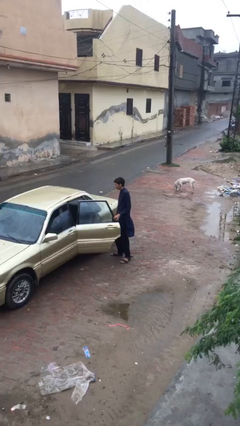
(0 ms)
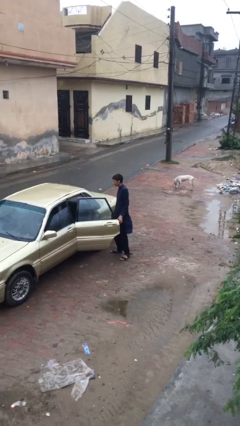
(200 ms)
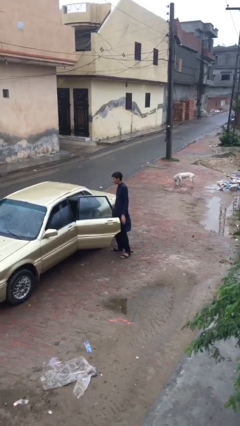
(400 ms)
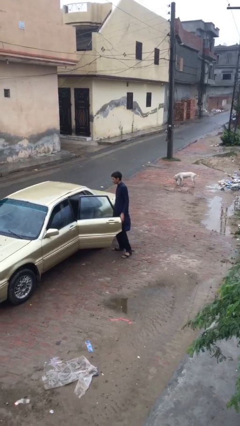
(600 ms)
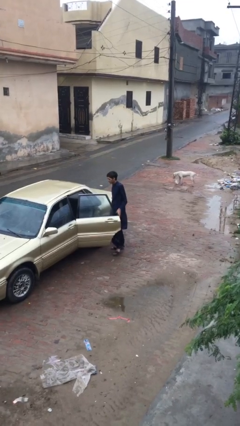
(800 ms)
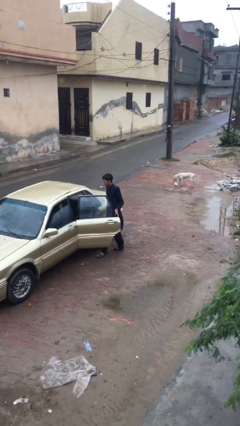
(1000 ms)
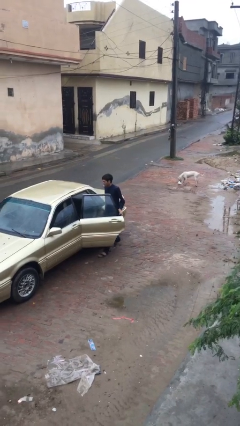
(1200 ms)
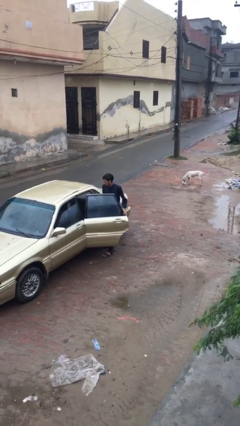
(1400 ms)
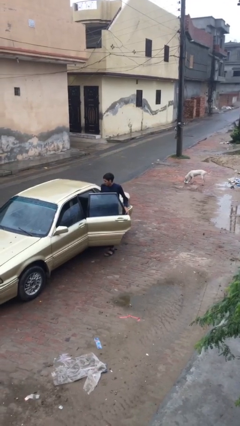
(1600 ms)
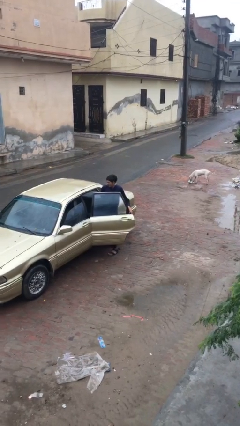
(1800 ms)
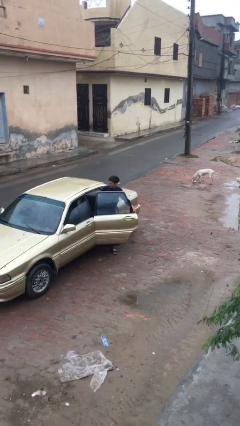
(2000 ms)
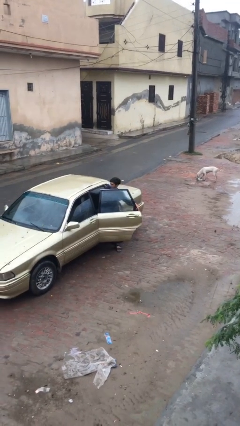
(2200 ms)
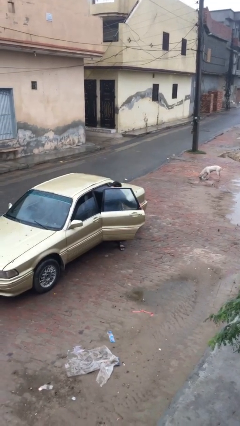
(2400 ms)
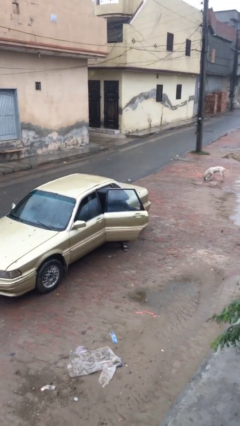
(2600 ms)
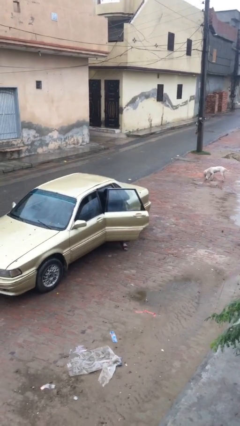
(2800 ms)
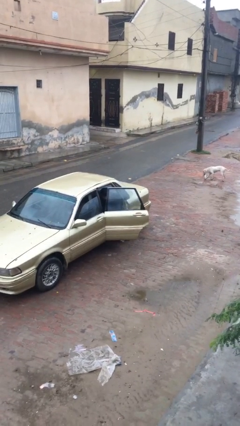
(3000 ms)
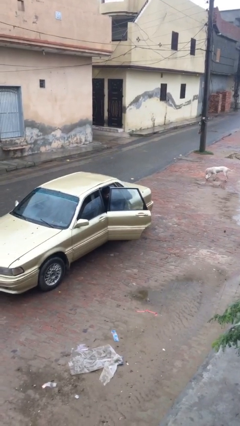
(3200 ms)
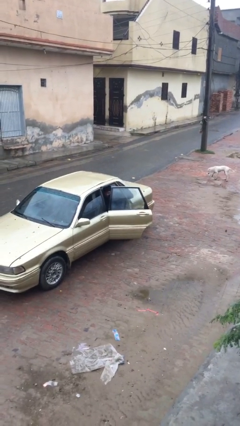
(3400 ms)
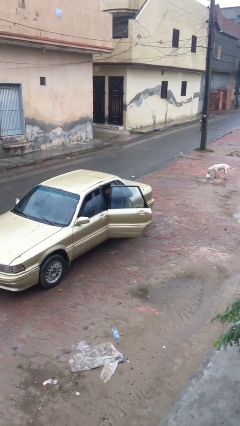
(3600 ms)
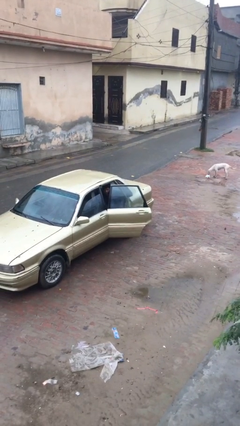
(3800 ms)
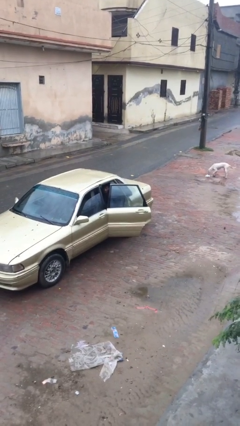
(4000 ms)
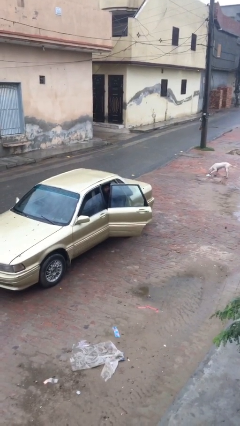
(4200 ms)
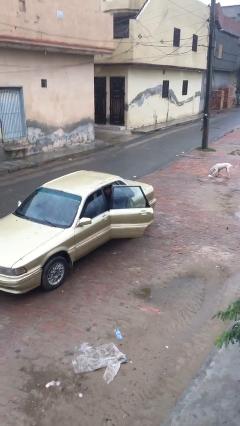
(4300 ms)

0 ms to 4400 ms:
person enters car

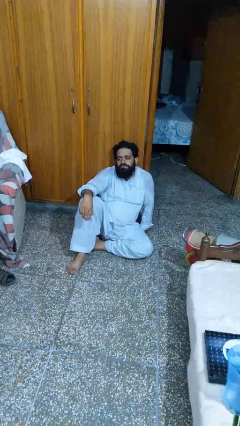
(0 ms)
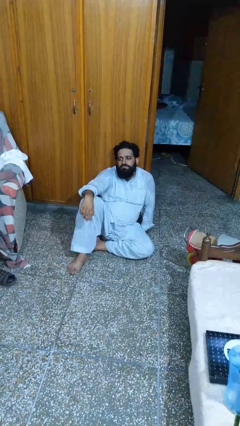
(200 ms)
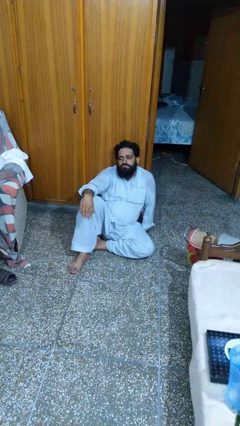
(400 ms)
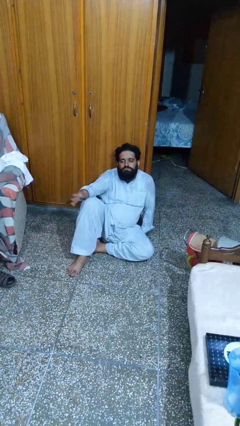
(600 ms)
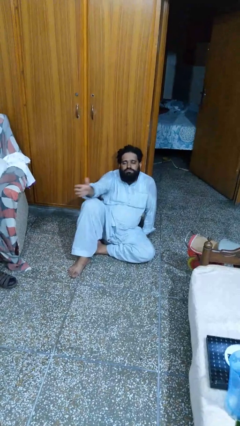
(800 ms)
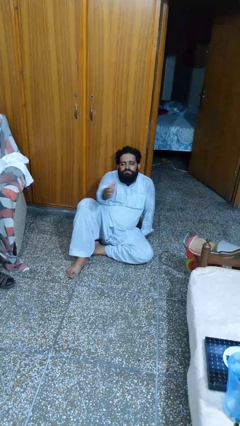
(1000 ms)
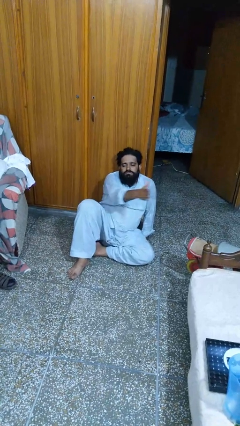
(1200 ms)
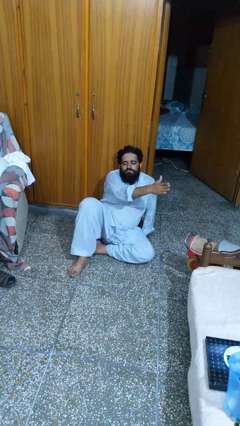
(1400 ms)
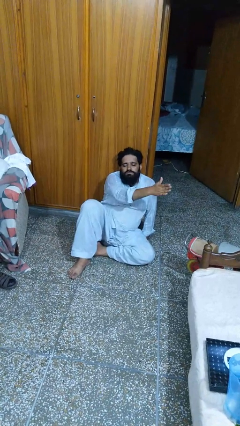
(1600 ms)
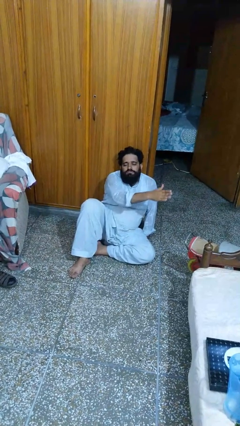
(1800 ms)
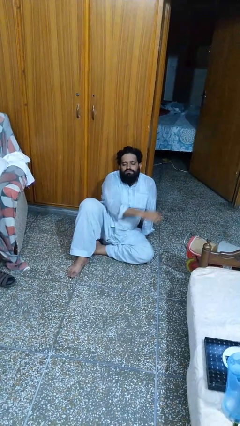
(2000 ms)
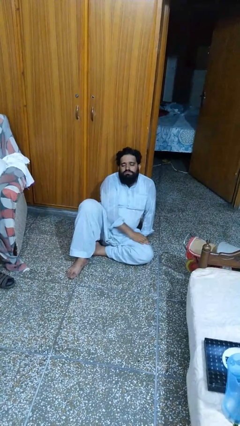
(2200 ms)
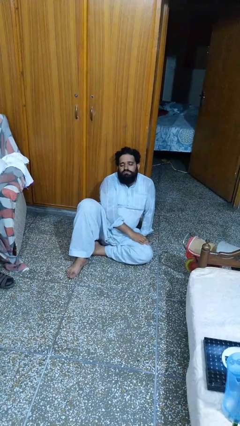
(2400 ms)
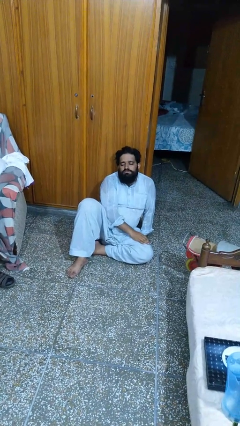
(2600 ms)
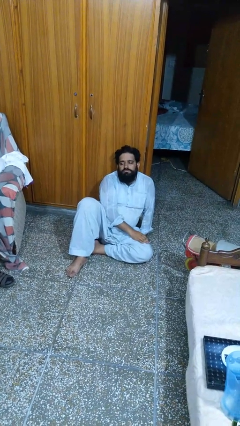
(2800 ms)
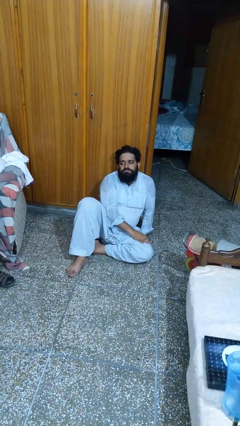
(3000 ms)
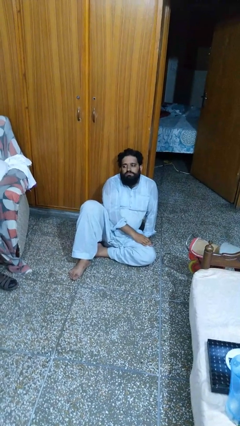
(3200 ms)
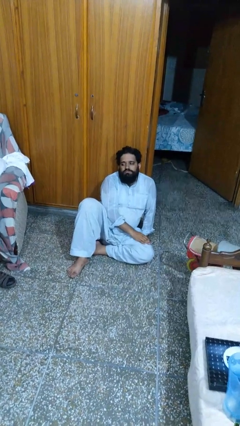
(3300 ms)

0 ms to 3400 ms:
person gestures swipe left

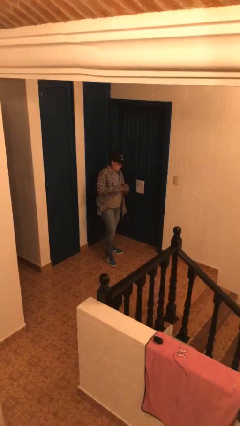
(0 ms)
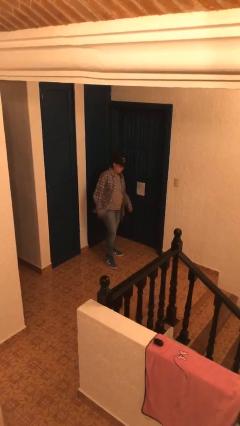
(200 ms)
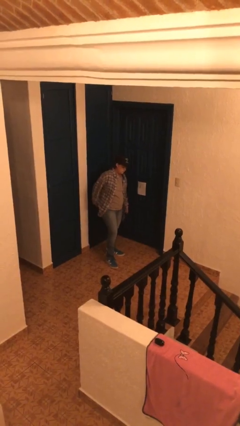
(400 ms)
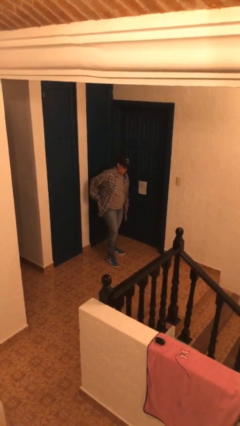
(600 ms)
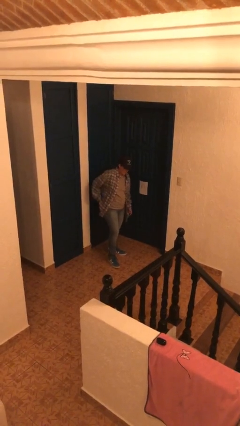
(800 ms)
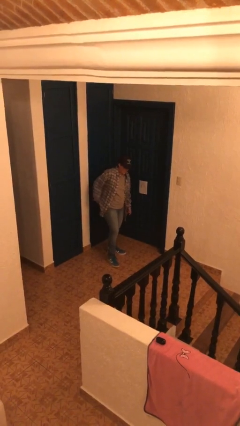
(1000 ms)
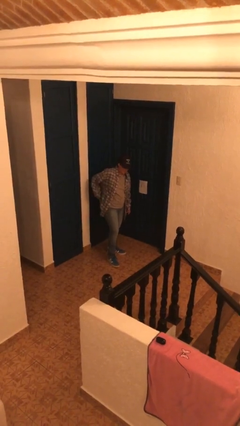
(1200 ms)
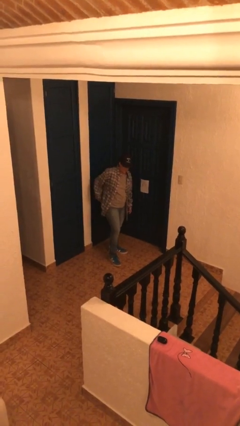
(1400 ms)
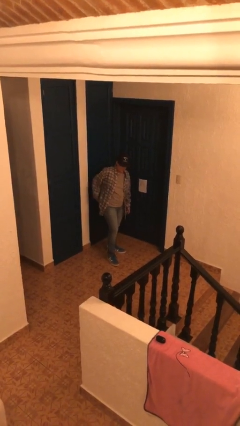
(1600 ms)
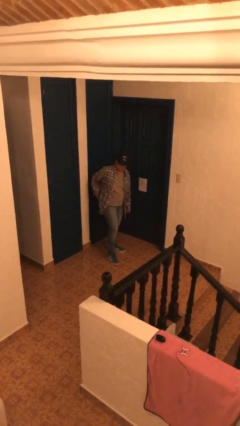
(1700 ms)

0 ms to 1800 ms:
person puts phone into pocket

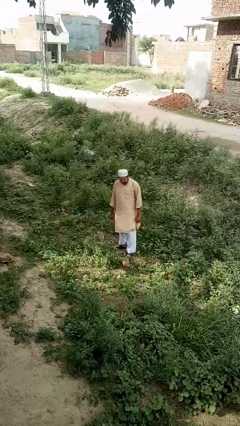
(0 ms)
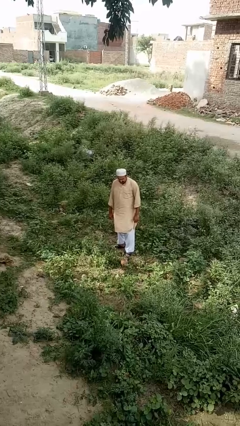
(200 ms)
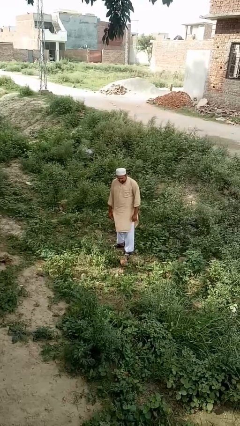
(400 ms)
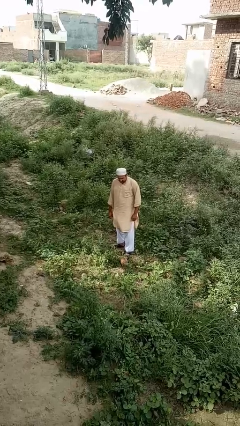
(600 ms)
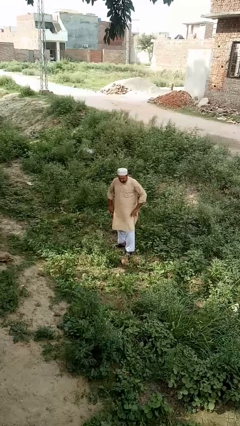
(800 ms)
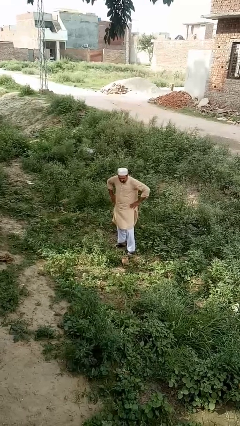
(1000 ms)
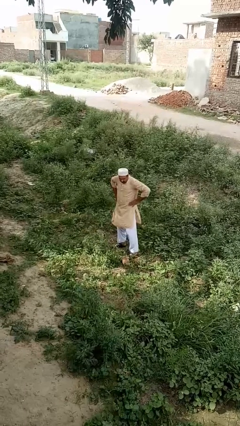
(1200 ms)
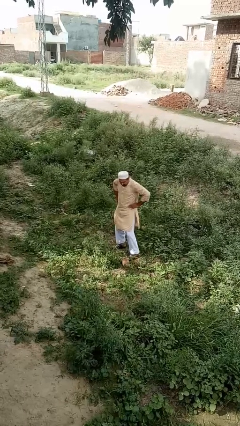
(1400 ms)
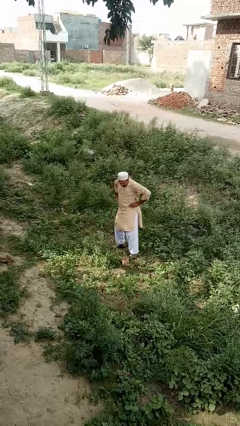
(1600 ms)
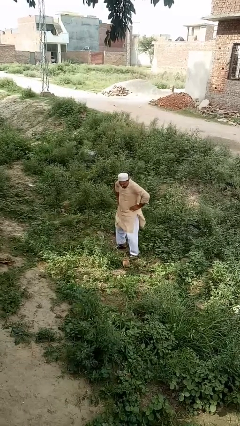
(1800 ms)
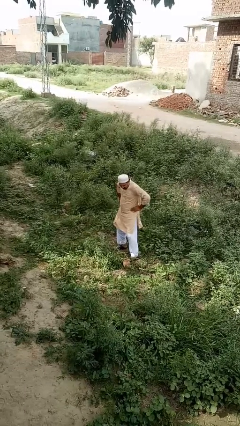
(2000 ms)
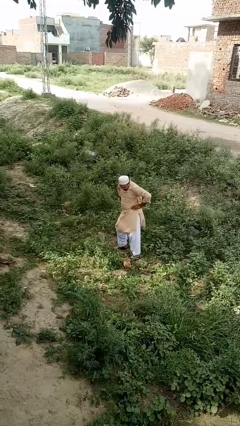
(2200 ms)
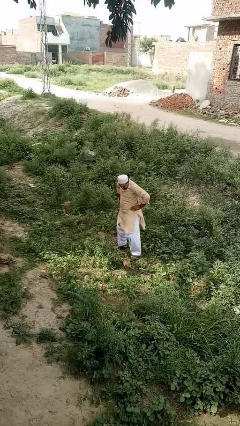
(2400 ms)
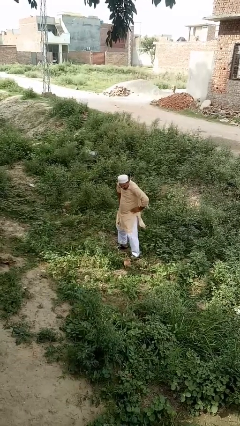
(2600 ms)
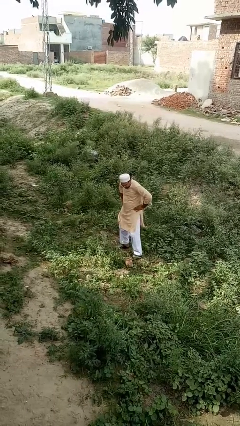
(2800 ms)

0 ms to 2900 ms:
person dances in place

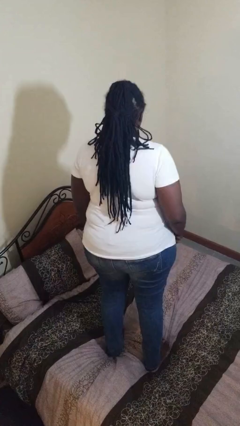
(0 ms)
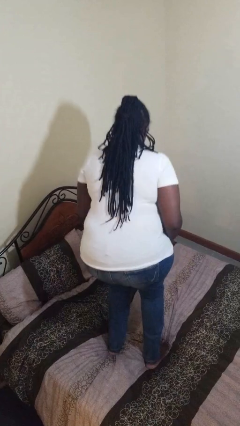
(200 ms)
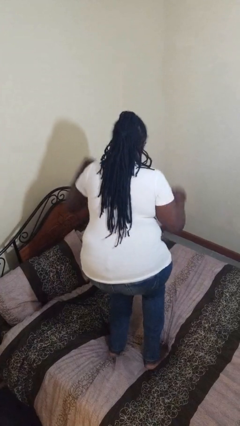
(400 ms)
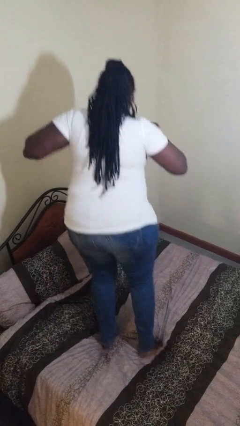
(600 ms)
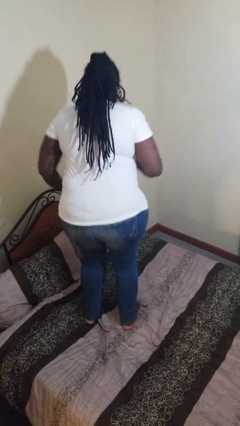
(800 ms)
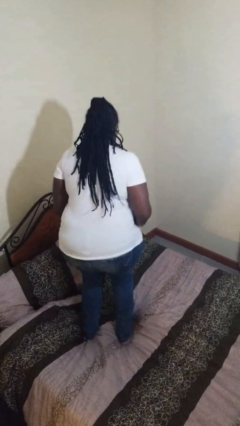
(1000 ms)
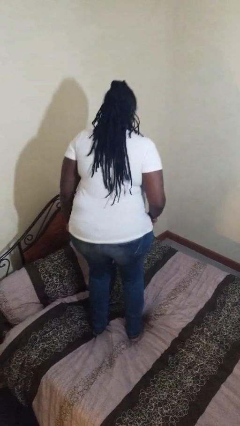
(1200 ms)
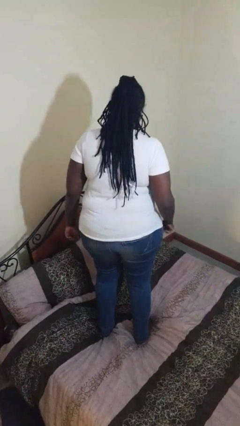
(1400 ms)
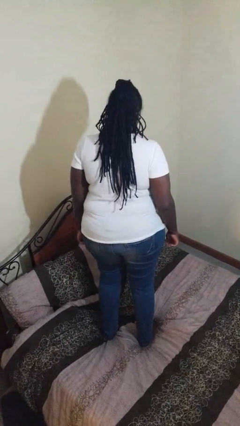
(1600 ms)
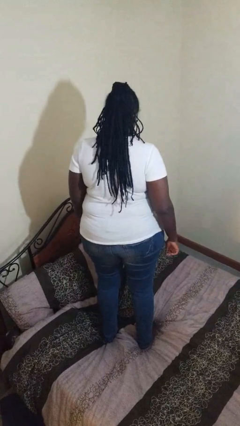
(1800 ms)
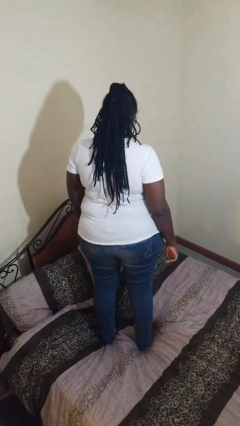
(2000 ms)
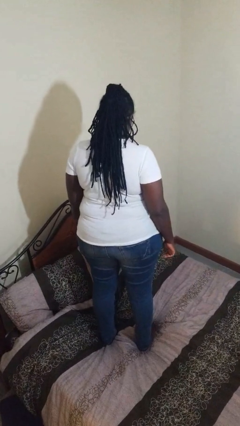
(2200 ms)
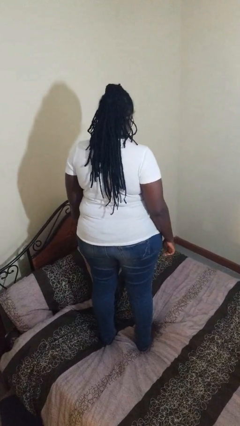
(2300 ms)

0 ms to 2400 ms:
person jumps on bed

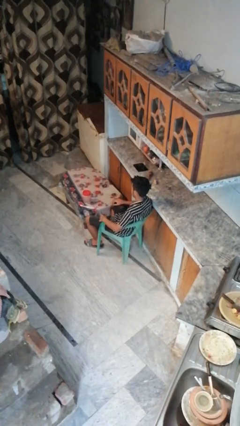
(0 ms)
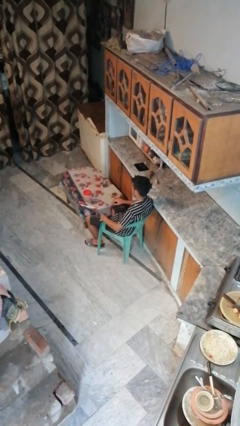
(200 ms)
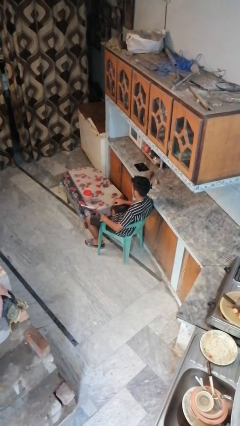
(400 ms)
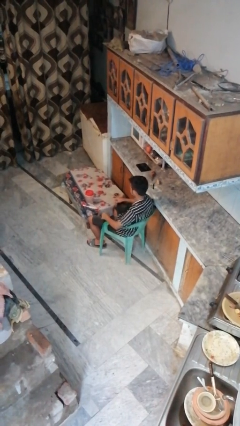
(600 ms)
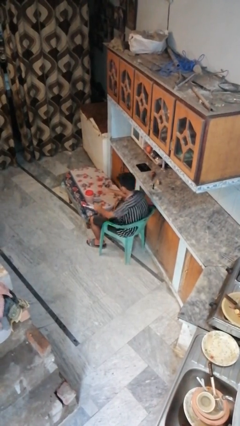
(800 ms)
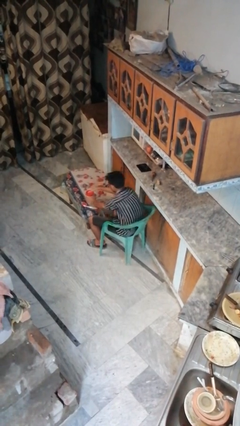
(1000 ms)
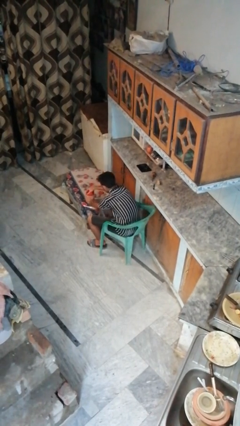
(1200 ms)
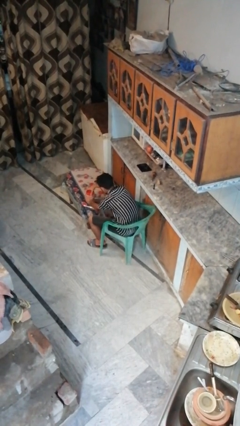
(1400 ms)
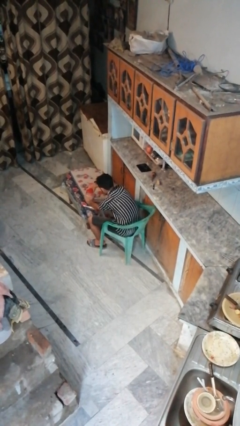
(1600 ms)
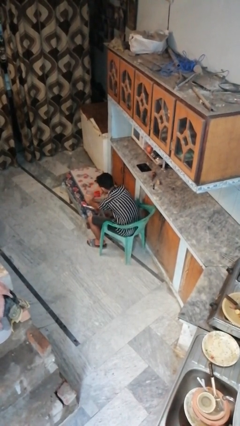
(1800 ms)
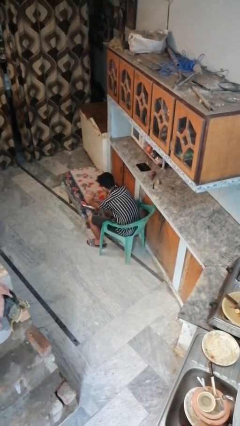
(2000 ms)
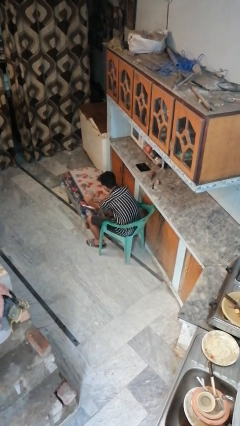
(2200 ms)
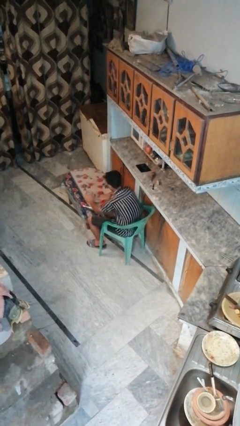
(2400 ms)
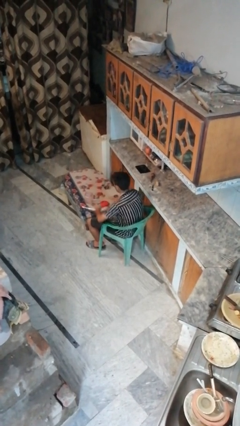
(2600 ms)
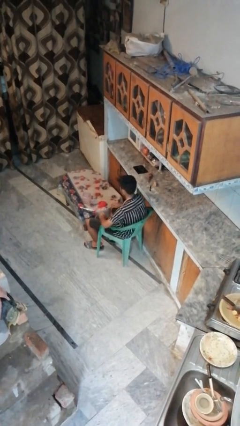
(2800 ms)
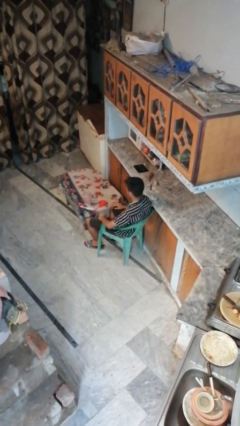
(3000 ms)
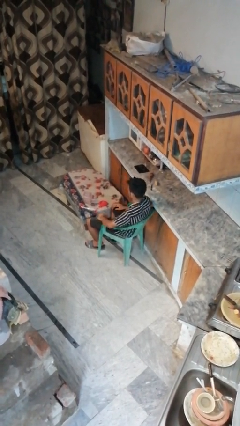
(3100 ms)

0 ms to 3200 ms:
person opens jar
